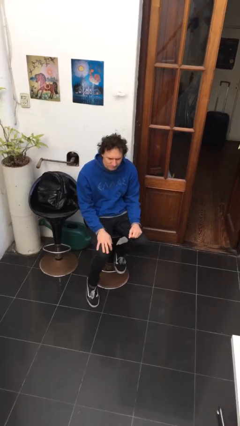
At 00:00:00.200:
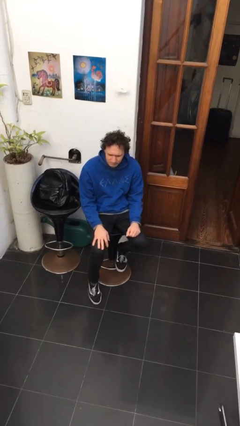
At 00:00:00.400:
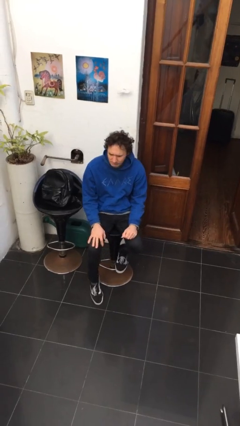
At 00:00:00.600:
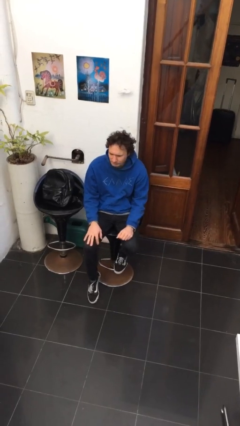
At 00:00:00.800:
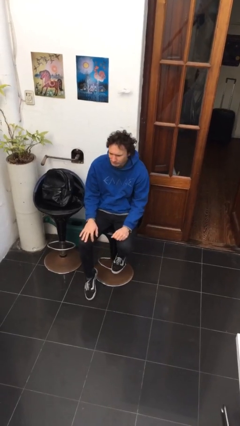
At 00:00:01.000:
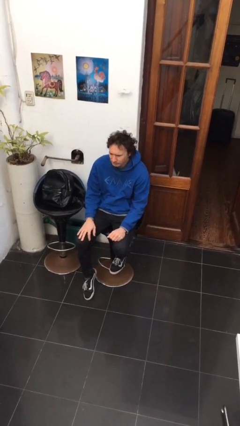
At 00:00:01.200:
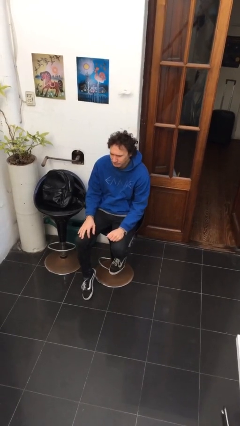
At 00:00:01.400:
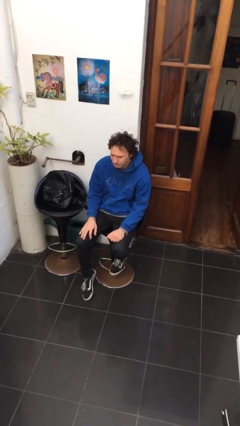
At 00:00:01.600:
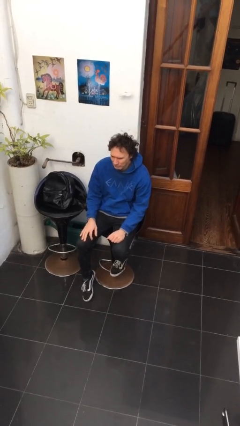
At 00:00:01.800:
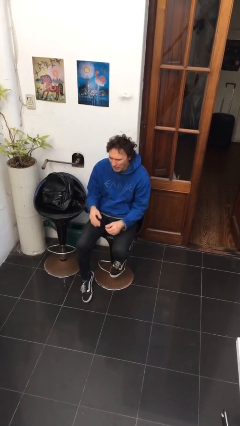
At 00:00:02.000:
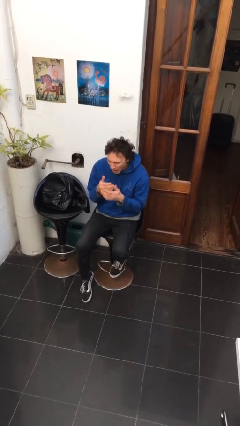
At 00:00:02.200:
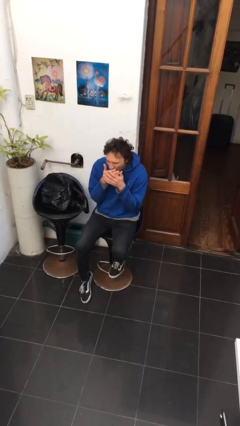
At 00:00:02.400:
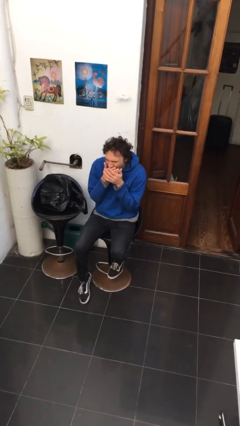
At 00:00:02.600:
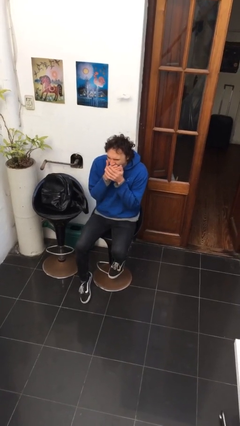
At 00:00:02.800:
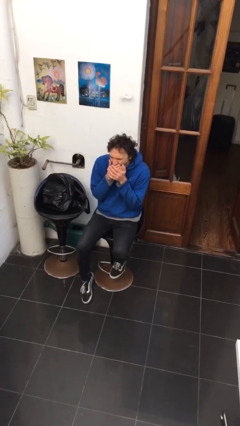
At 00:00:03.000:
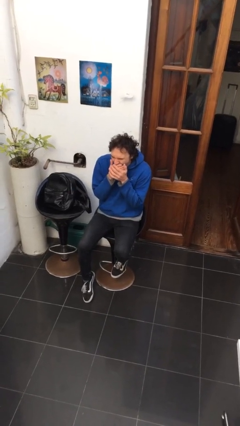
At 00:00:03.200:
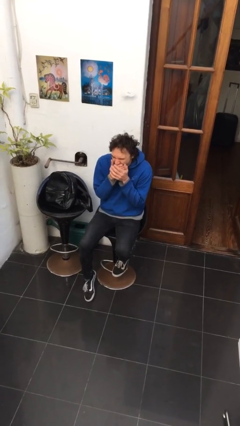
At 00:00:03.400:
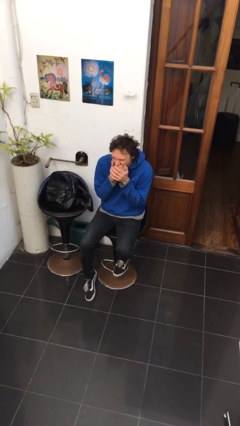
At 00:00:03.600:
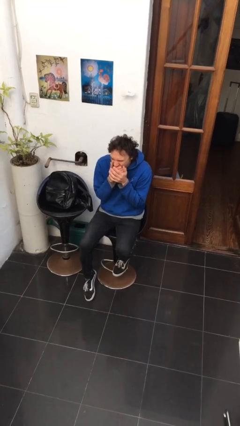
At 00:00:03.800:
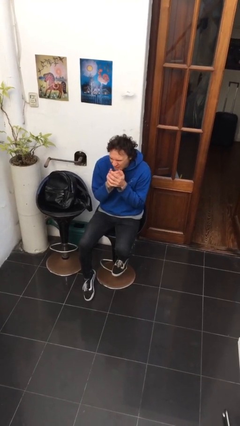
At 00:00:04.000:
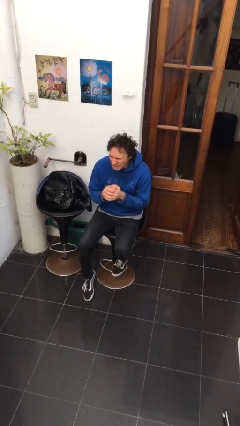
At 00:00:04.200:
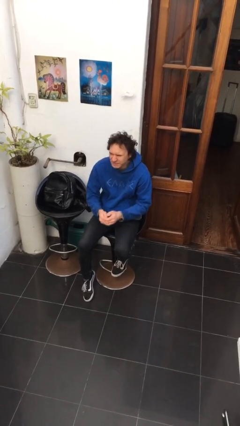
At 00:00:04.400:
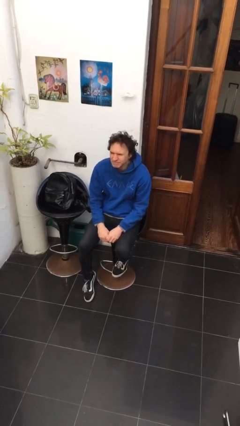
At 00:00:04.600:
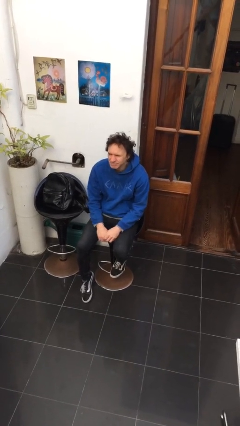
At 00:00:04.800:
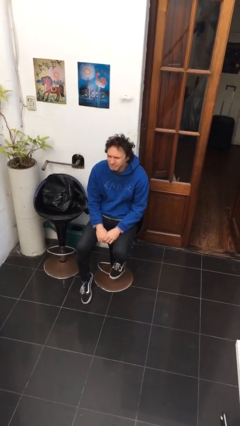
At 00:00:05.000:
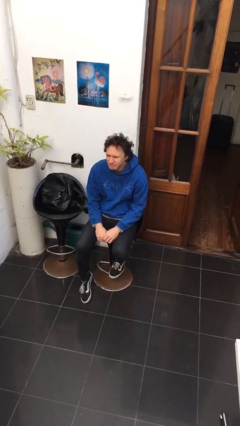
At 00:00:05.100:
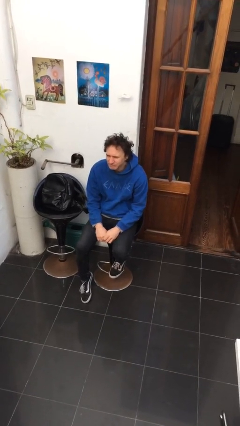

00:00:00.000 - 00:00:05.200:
person yawns

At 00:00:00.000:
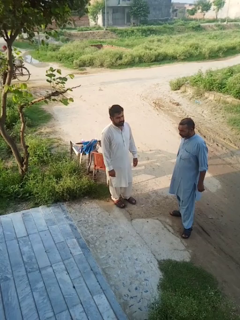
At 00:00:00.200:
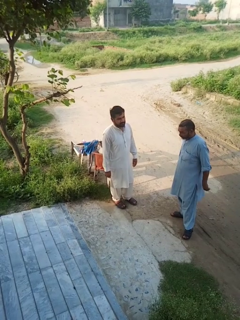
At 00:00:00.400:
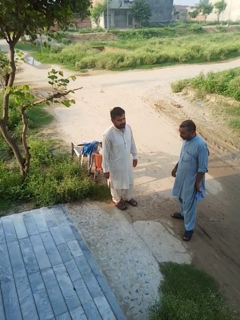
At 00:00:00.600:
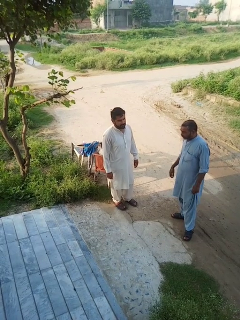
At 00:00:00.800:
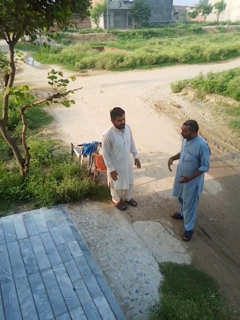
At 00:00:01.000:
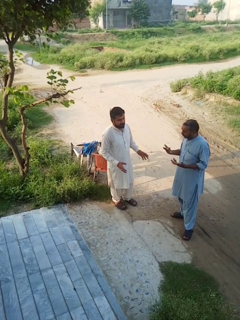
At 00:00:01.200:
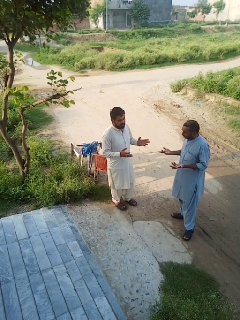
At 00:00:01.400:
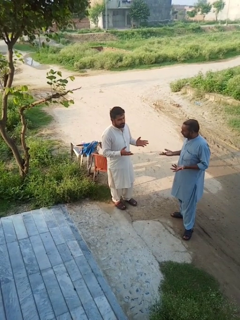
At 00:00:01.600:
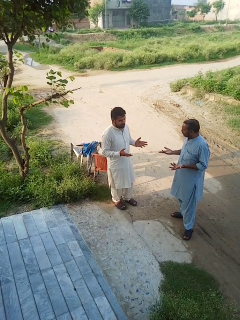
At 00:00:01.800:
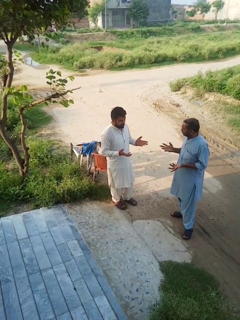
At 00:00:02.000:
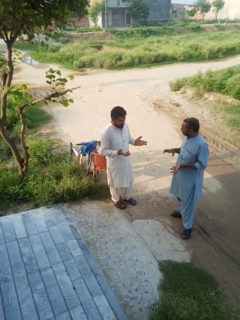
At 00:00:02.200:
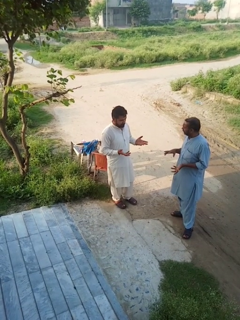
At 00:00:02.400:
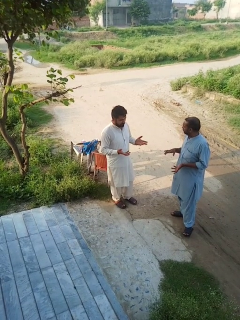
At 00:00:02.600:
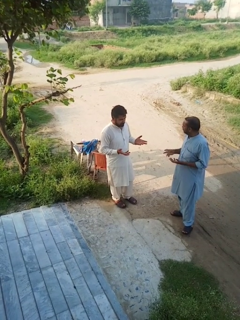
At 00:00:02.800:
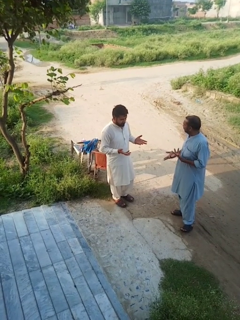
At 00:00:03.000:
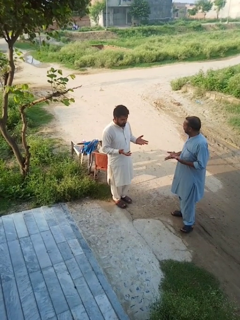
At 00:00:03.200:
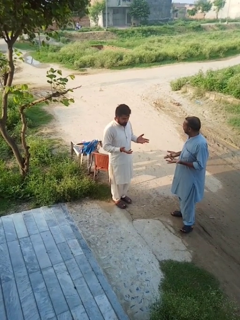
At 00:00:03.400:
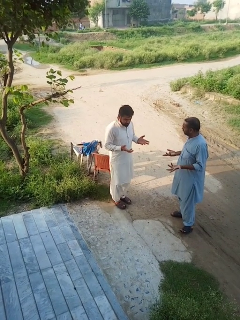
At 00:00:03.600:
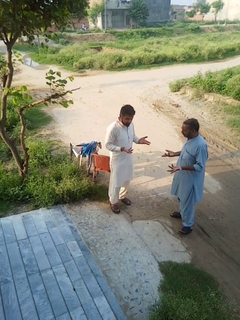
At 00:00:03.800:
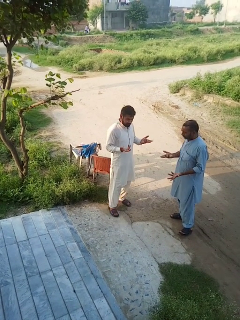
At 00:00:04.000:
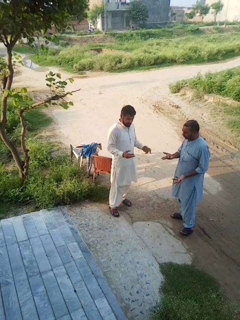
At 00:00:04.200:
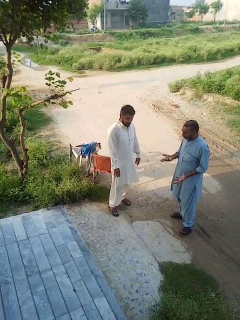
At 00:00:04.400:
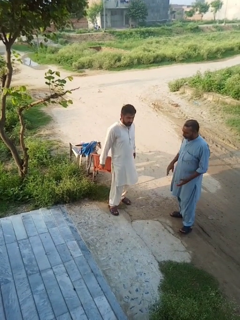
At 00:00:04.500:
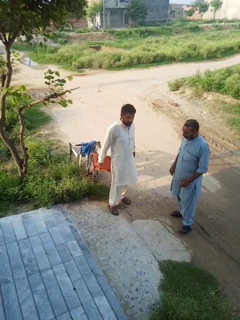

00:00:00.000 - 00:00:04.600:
person talks to person

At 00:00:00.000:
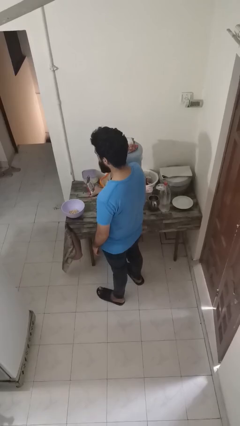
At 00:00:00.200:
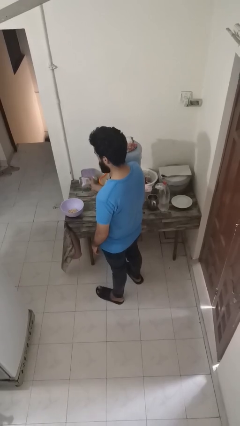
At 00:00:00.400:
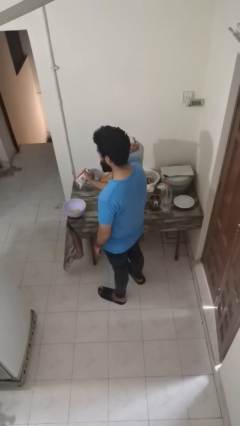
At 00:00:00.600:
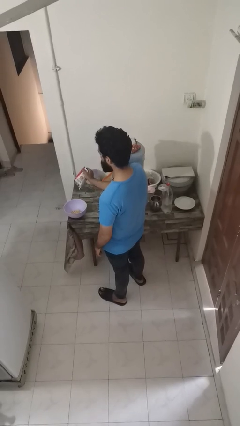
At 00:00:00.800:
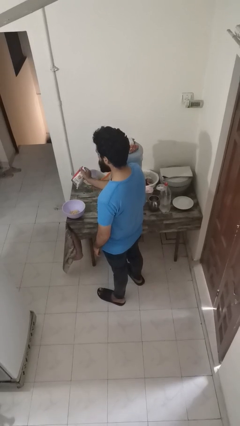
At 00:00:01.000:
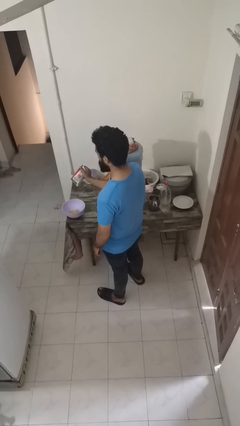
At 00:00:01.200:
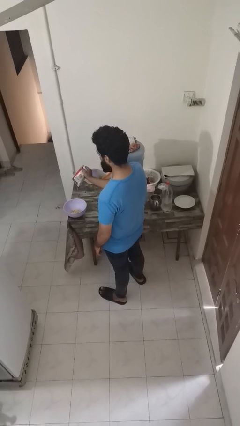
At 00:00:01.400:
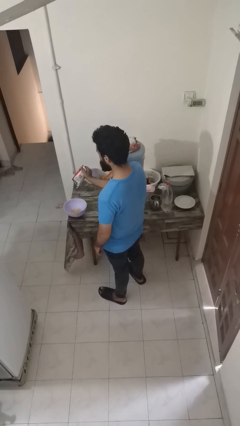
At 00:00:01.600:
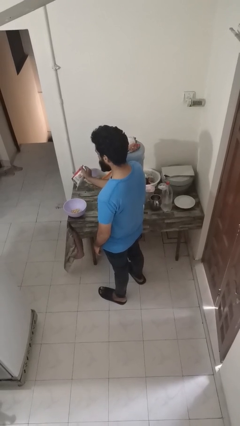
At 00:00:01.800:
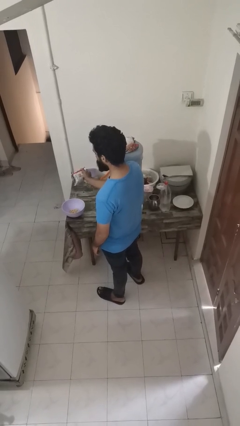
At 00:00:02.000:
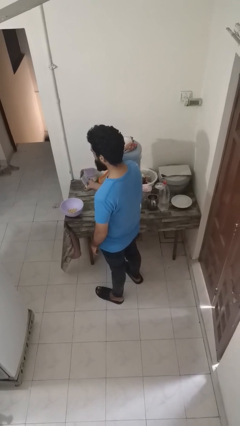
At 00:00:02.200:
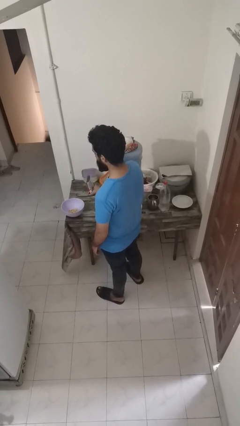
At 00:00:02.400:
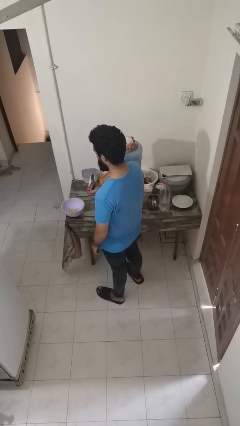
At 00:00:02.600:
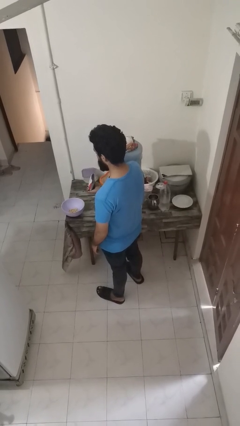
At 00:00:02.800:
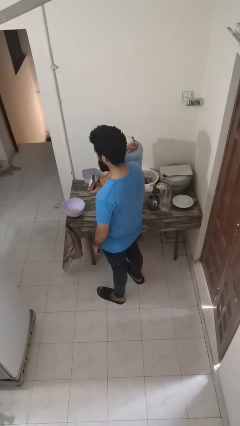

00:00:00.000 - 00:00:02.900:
person pours into bowl

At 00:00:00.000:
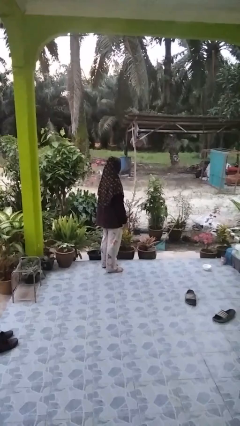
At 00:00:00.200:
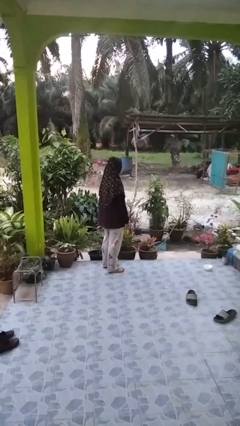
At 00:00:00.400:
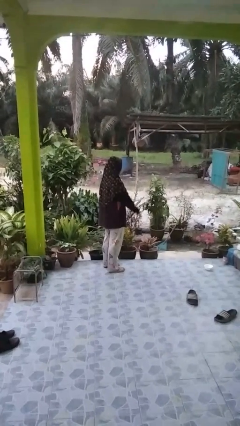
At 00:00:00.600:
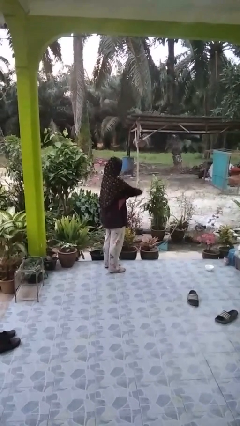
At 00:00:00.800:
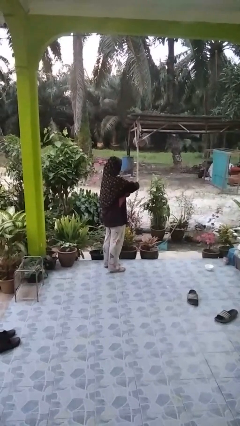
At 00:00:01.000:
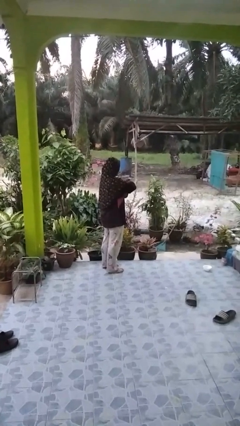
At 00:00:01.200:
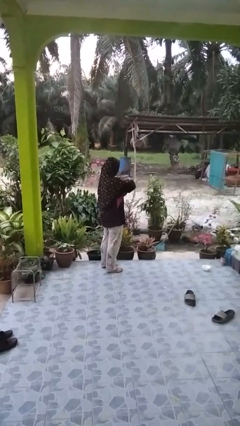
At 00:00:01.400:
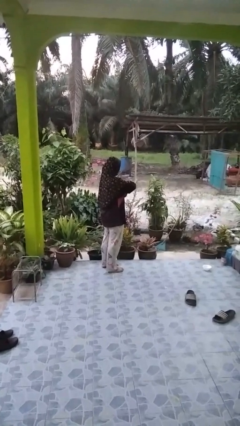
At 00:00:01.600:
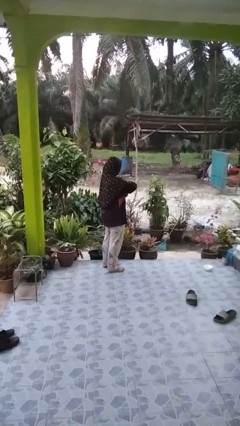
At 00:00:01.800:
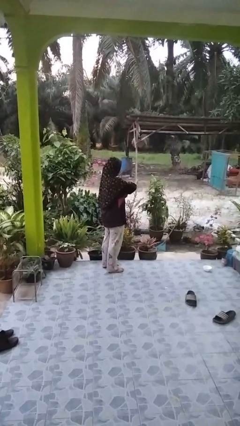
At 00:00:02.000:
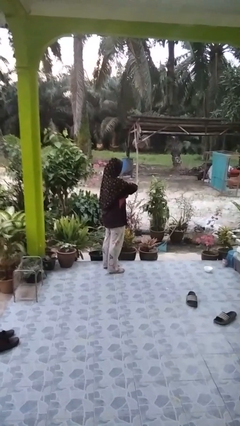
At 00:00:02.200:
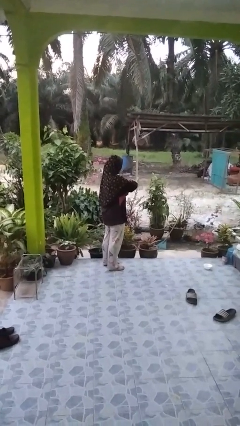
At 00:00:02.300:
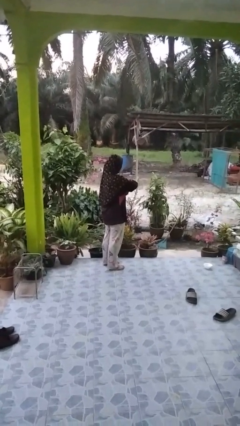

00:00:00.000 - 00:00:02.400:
person looks at wristwatch

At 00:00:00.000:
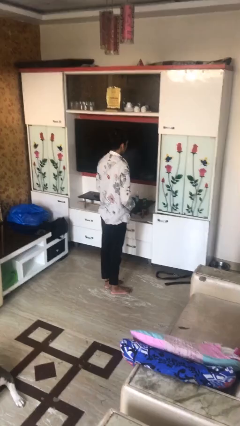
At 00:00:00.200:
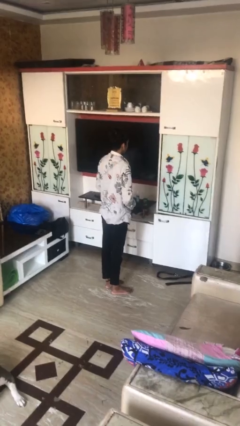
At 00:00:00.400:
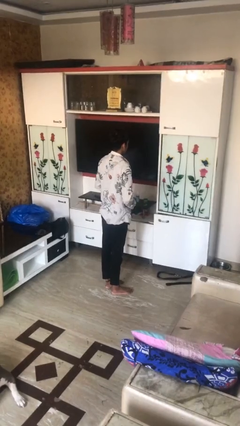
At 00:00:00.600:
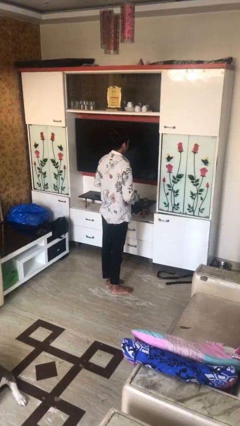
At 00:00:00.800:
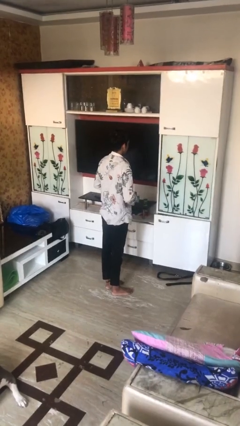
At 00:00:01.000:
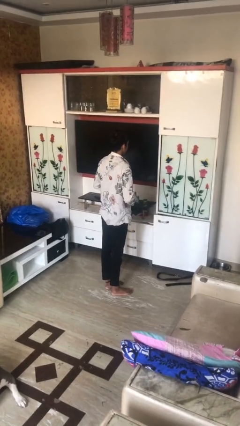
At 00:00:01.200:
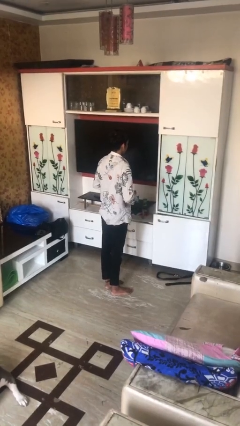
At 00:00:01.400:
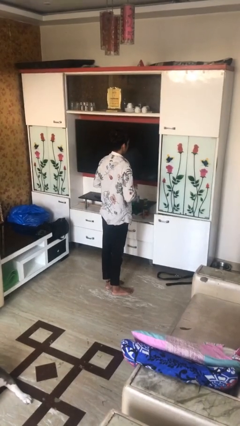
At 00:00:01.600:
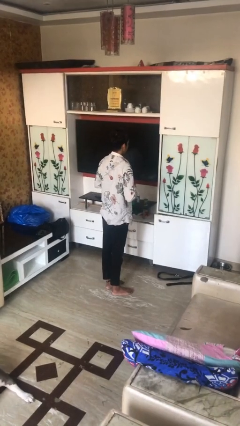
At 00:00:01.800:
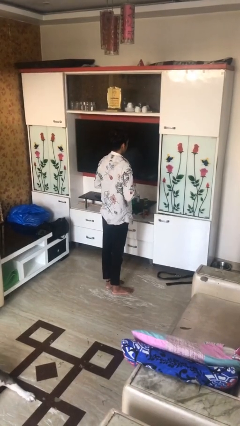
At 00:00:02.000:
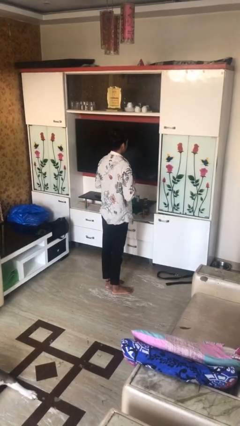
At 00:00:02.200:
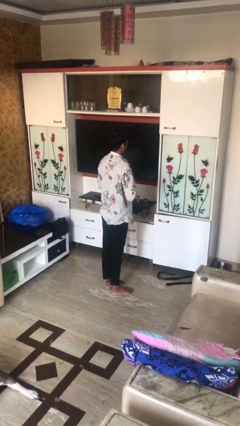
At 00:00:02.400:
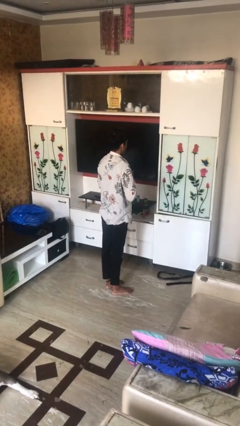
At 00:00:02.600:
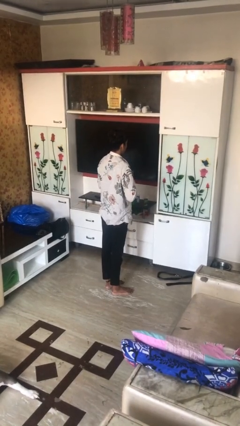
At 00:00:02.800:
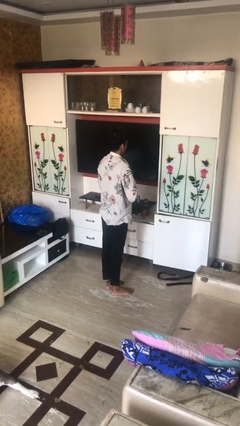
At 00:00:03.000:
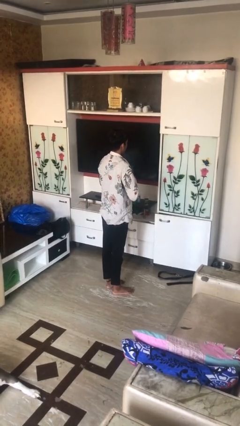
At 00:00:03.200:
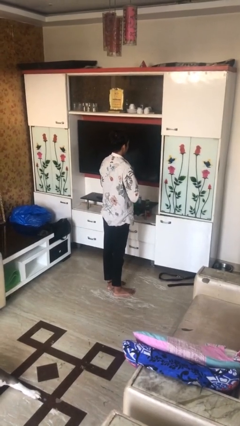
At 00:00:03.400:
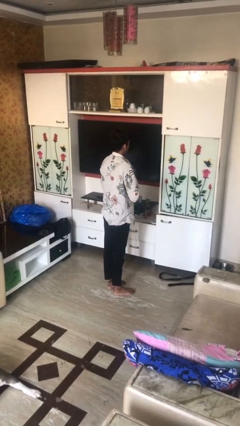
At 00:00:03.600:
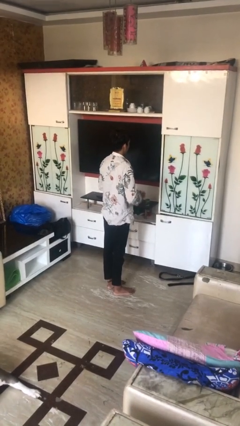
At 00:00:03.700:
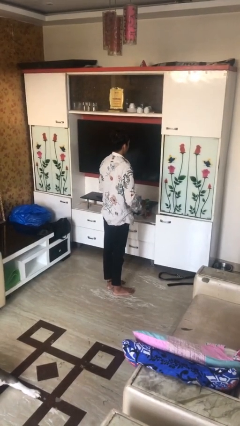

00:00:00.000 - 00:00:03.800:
person buttons shirt
